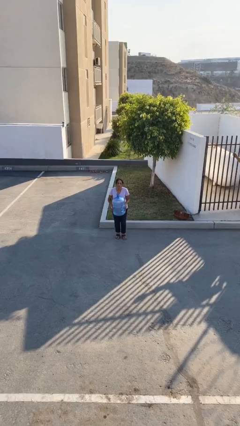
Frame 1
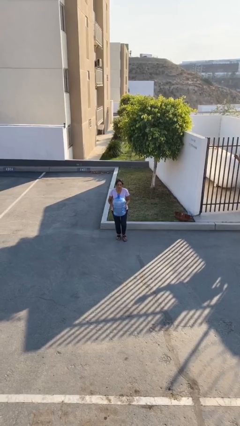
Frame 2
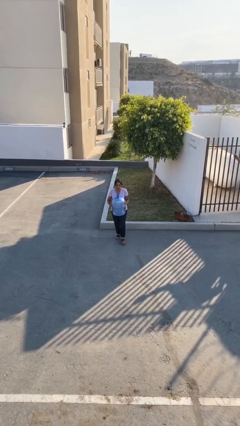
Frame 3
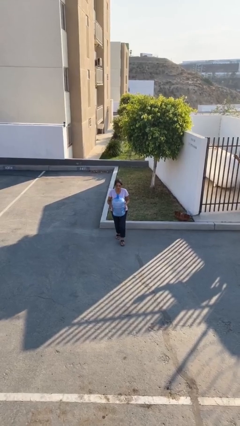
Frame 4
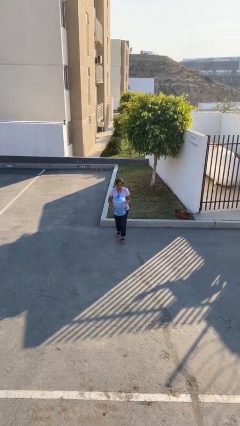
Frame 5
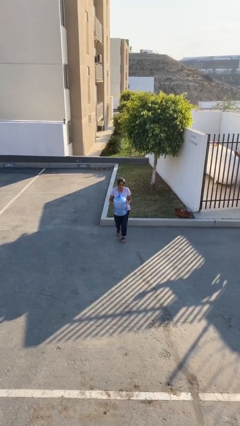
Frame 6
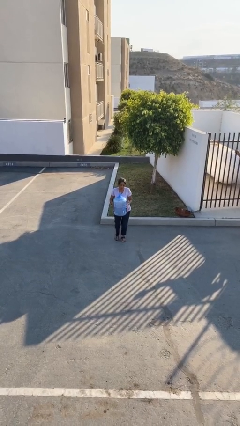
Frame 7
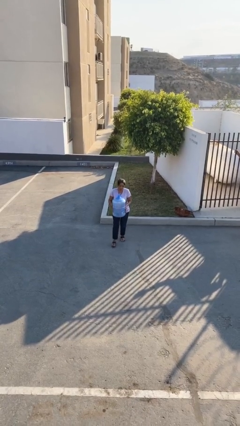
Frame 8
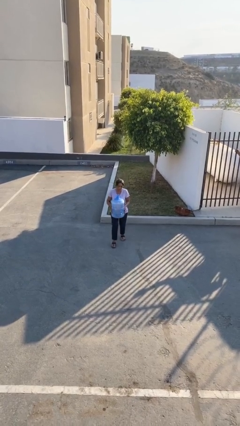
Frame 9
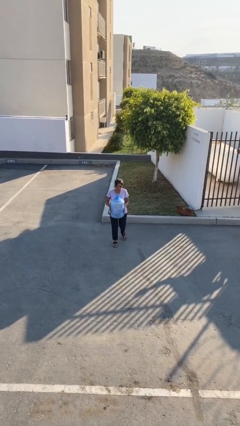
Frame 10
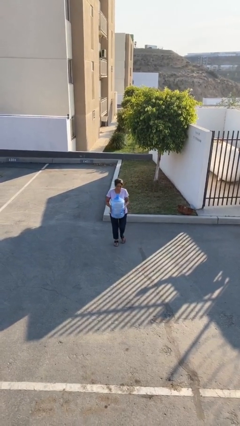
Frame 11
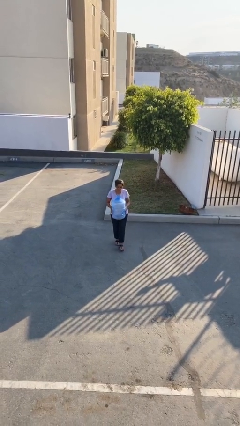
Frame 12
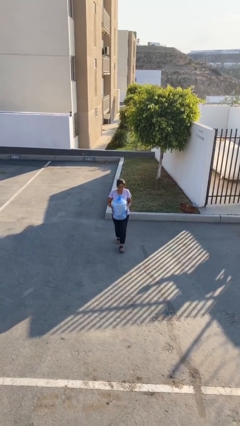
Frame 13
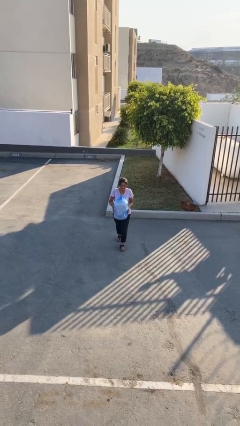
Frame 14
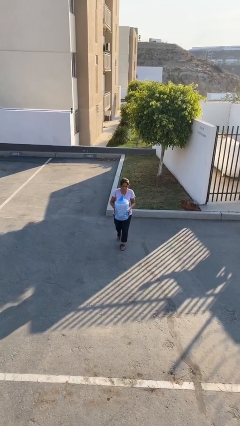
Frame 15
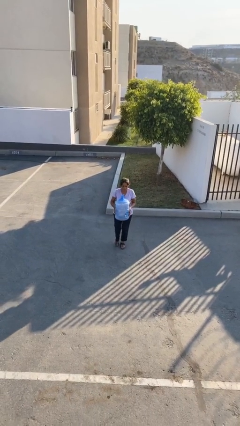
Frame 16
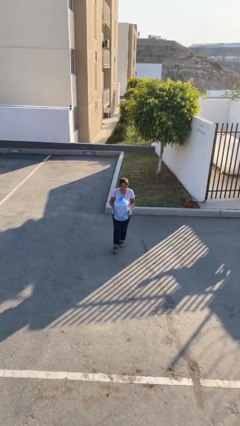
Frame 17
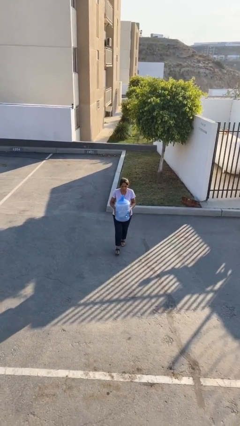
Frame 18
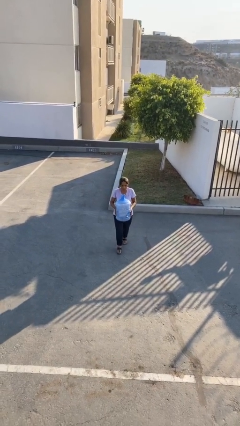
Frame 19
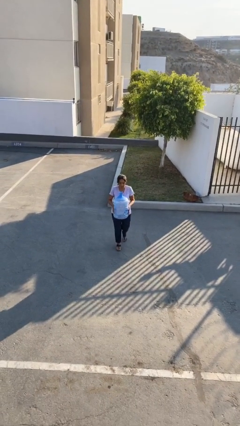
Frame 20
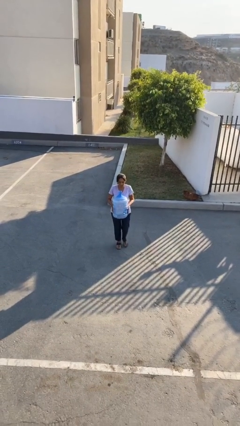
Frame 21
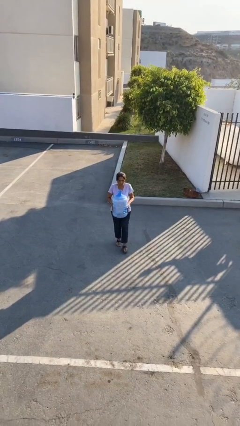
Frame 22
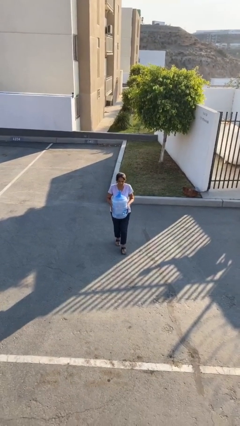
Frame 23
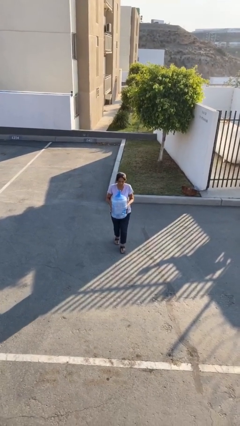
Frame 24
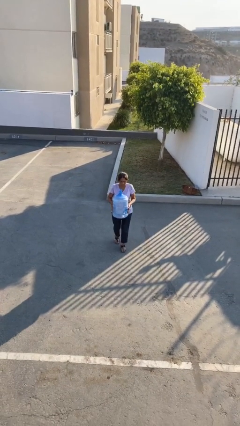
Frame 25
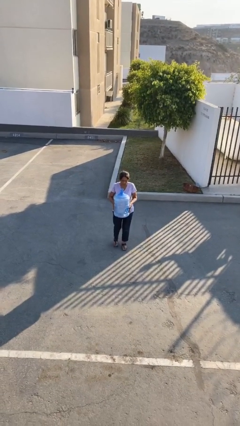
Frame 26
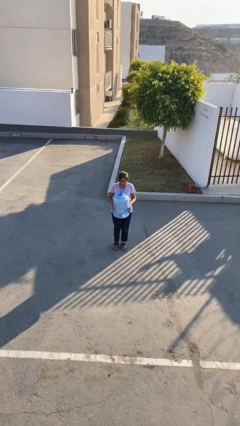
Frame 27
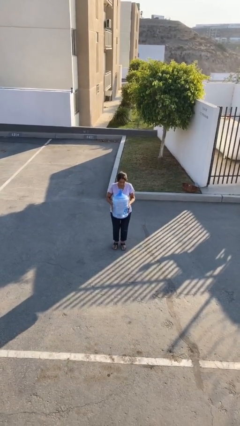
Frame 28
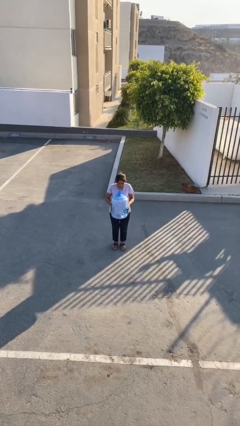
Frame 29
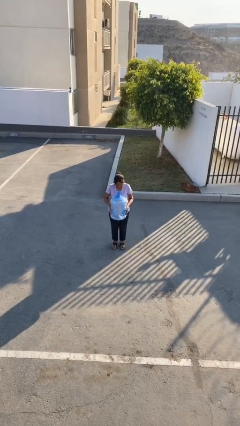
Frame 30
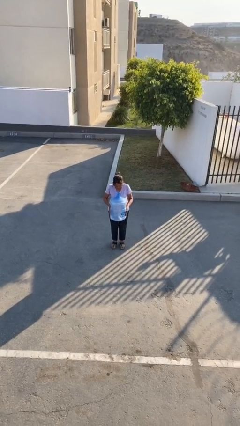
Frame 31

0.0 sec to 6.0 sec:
person carries heavy object

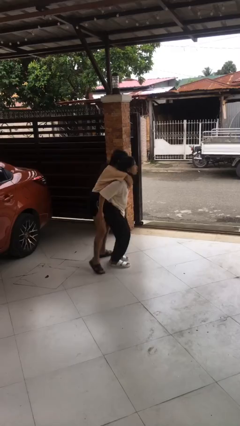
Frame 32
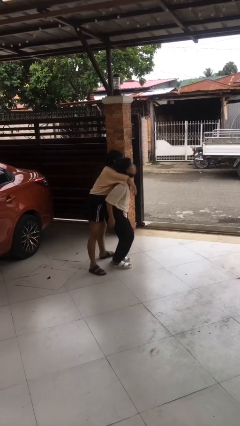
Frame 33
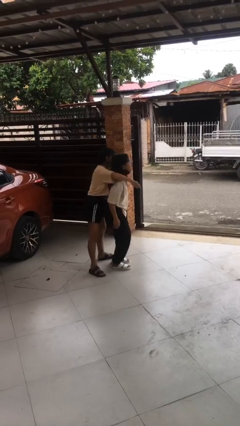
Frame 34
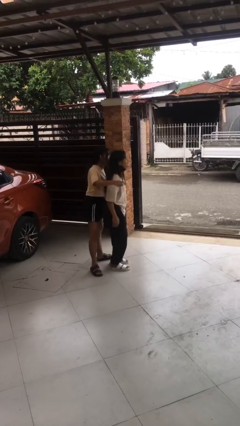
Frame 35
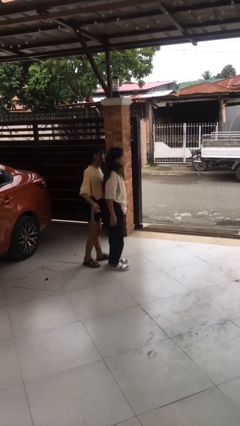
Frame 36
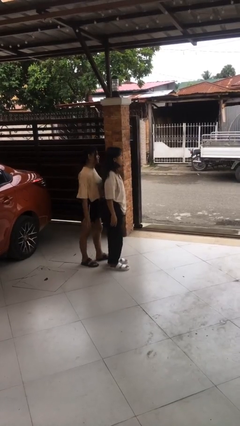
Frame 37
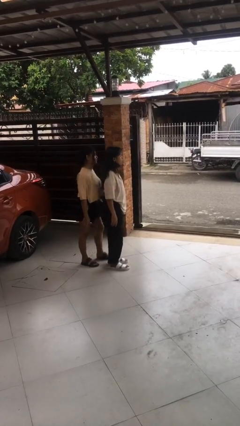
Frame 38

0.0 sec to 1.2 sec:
person puts down person

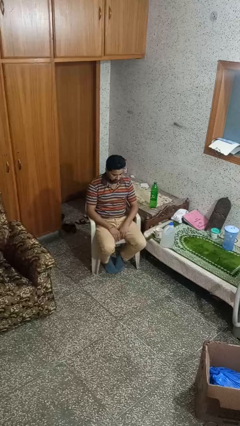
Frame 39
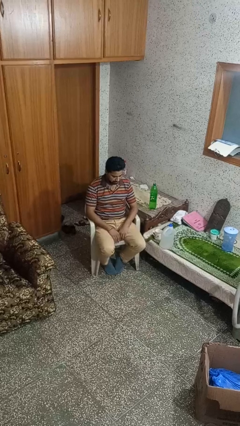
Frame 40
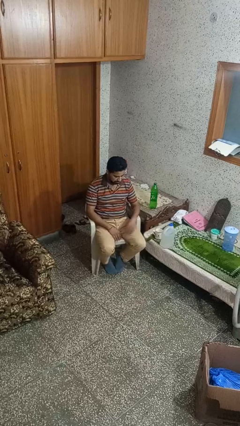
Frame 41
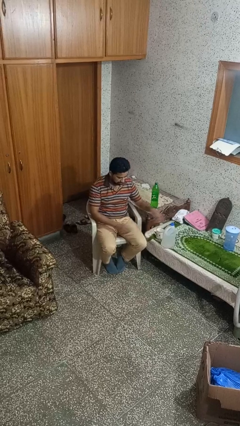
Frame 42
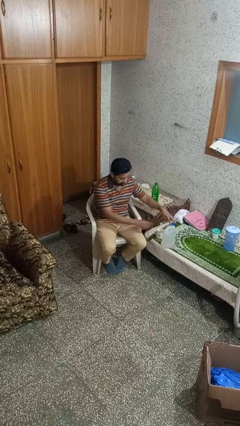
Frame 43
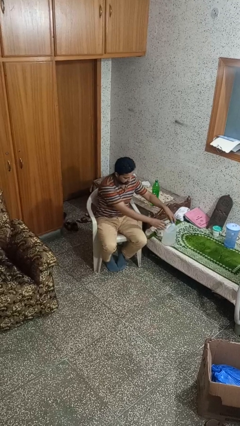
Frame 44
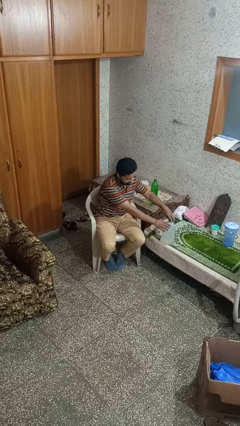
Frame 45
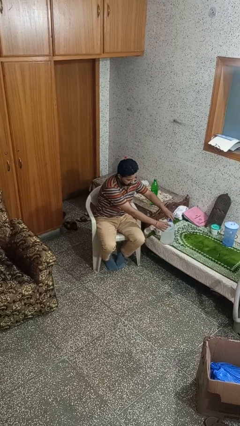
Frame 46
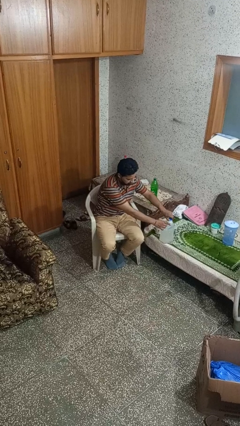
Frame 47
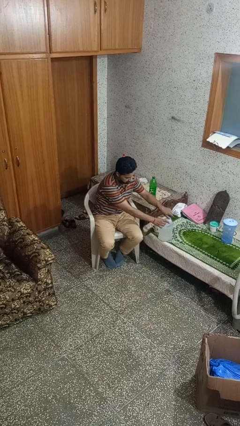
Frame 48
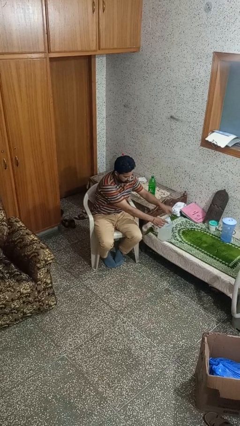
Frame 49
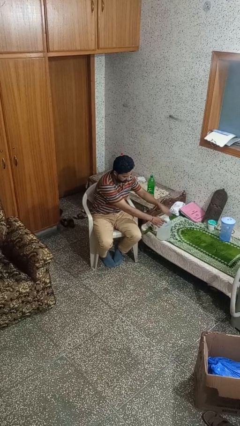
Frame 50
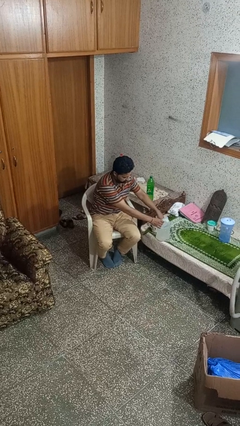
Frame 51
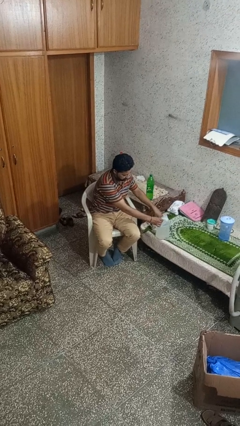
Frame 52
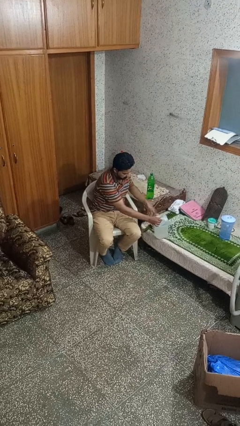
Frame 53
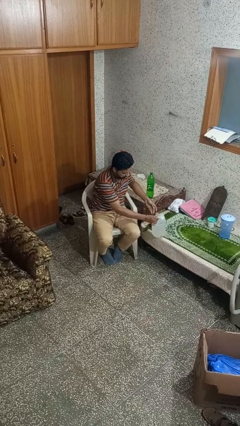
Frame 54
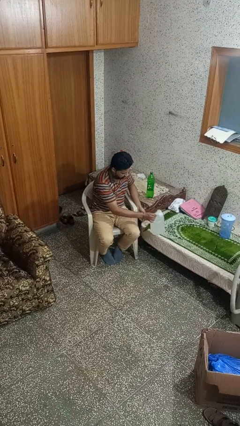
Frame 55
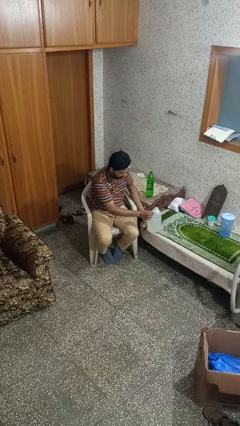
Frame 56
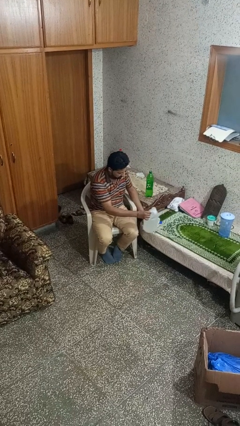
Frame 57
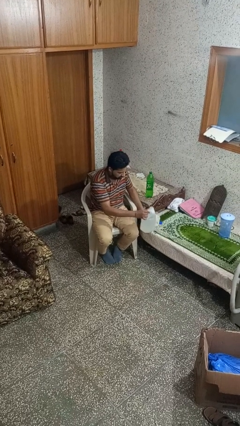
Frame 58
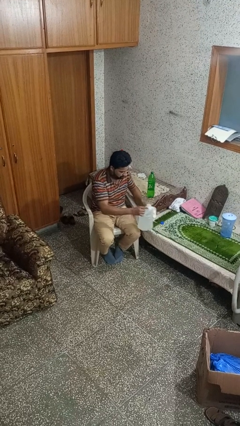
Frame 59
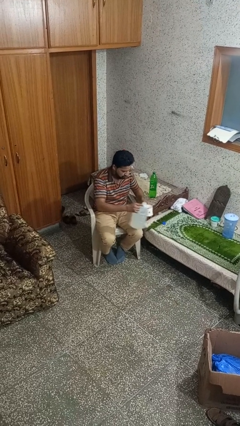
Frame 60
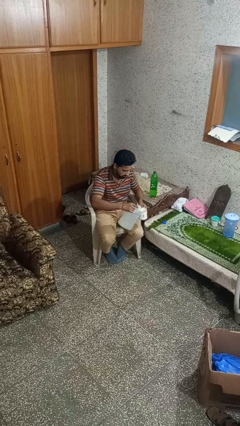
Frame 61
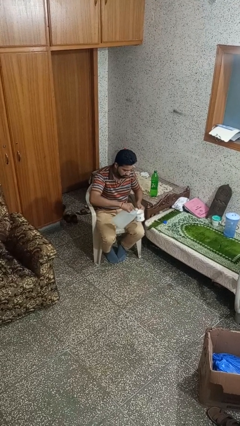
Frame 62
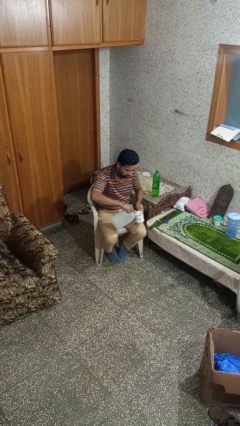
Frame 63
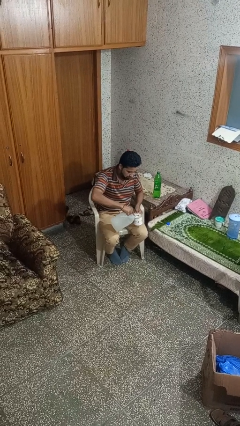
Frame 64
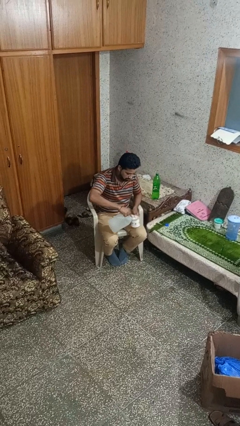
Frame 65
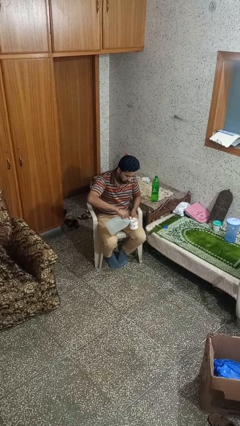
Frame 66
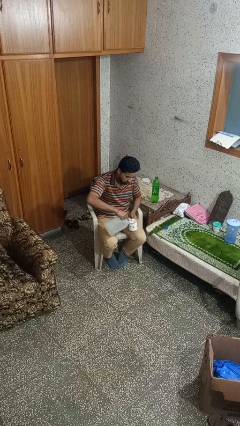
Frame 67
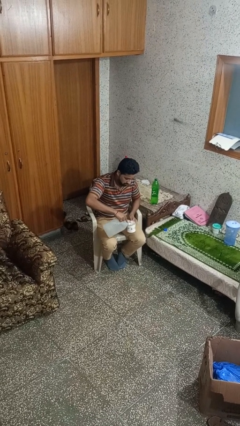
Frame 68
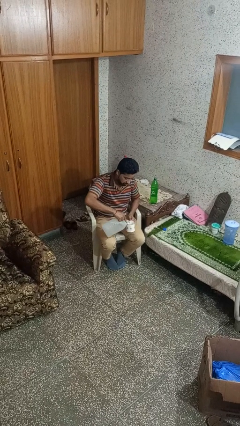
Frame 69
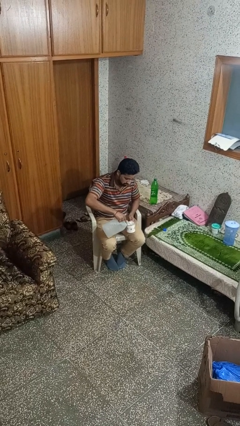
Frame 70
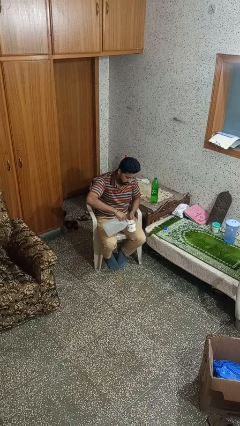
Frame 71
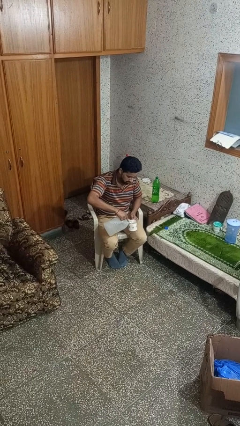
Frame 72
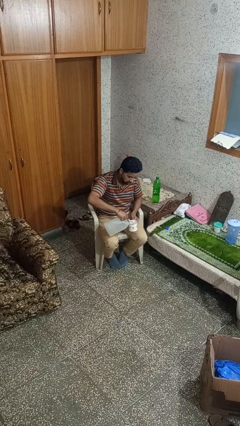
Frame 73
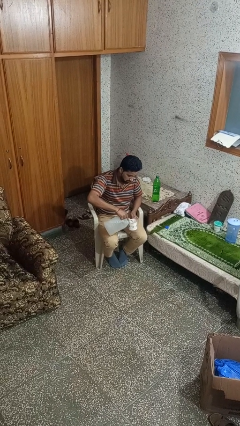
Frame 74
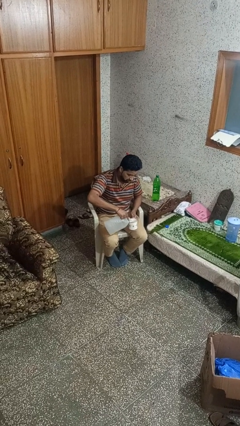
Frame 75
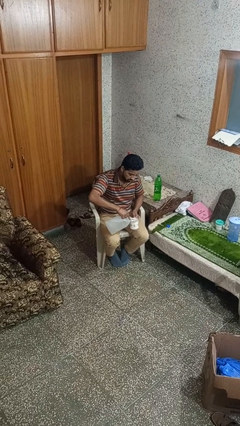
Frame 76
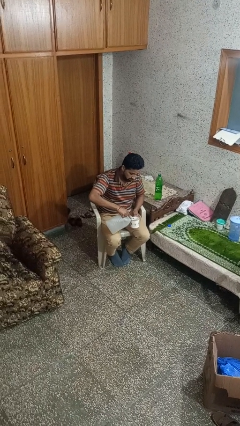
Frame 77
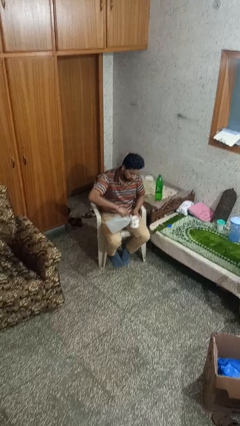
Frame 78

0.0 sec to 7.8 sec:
person pours liquid into cup

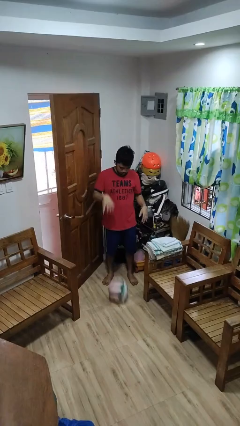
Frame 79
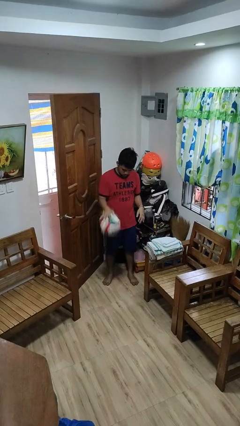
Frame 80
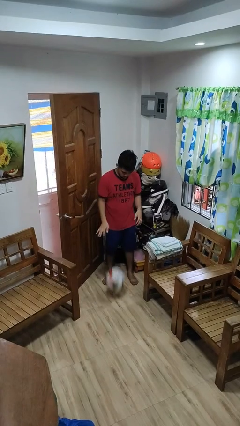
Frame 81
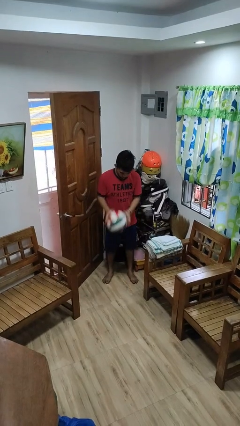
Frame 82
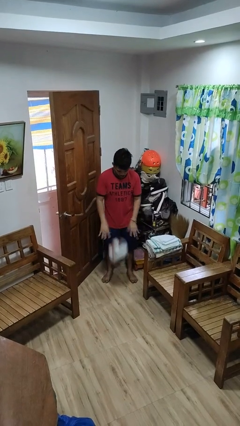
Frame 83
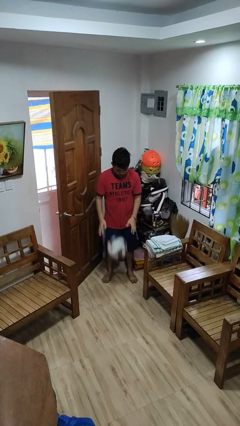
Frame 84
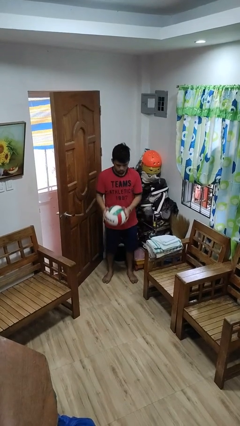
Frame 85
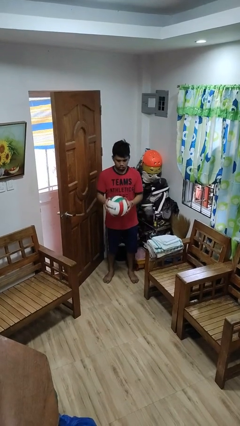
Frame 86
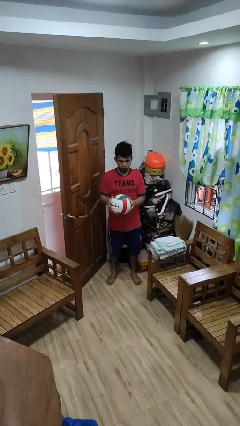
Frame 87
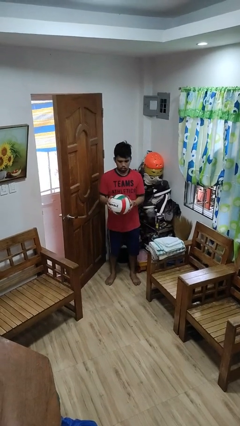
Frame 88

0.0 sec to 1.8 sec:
person bounces ball on floor

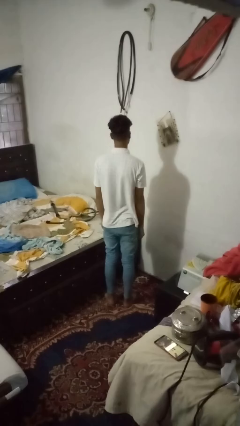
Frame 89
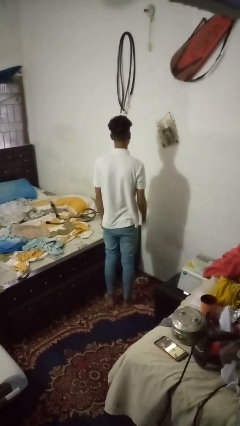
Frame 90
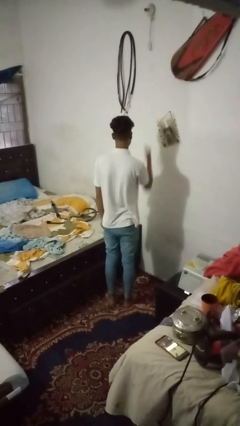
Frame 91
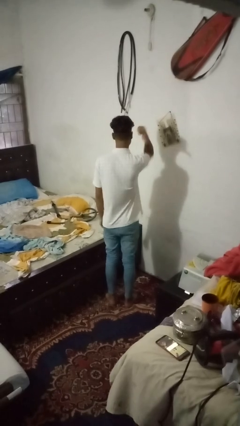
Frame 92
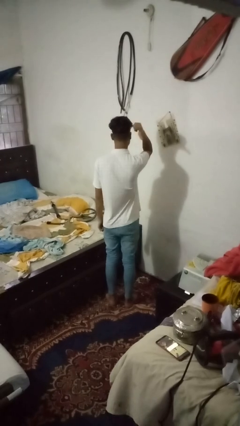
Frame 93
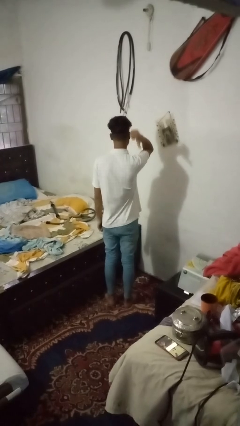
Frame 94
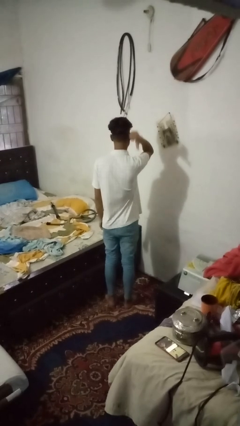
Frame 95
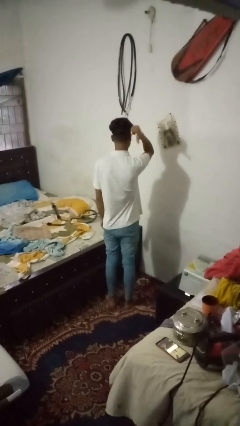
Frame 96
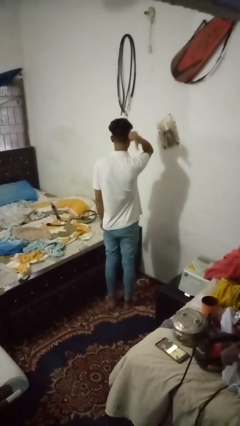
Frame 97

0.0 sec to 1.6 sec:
person gestures behind me
